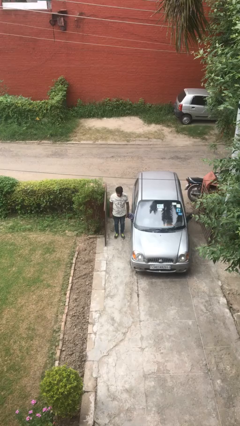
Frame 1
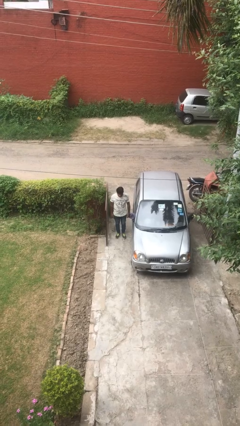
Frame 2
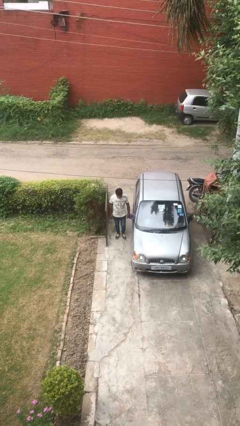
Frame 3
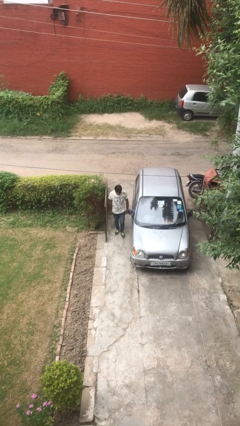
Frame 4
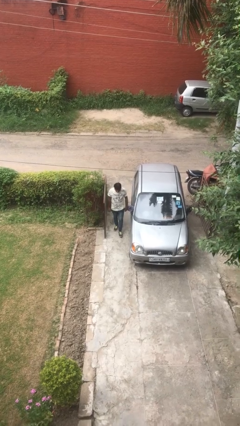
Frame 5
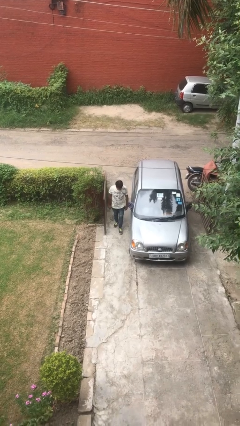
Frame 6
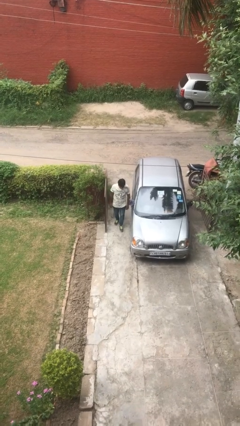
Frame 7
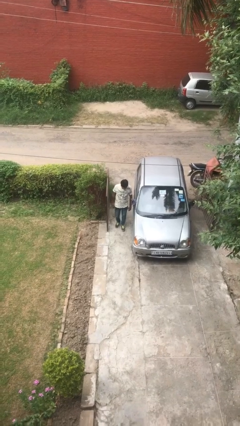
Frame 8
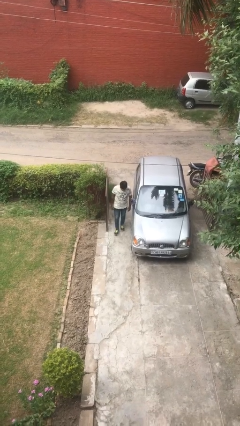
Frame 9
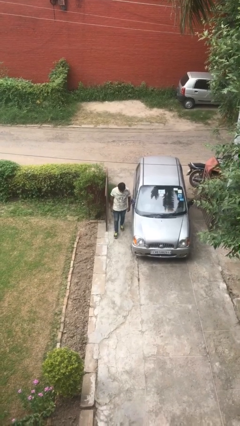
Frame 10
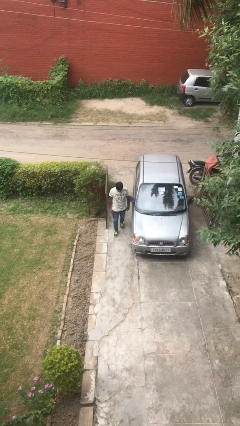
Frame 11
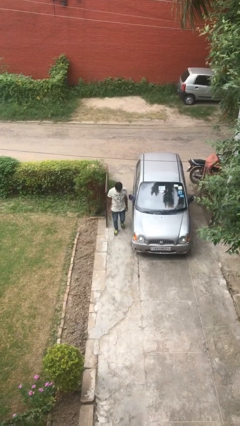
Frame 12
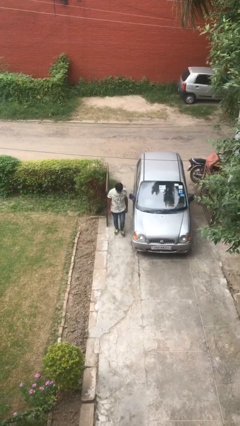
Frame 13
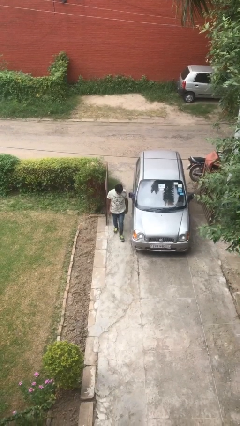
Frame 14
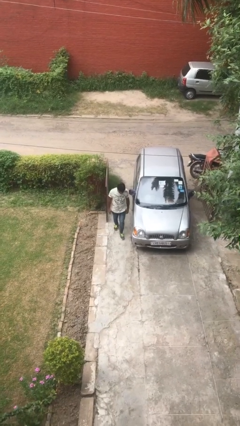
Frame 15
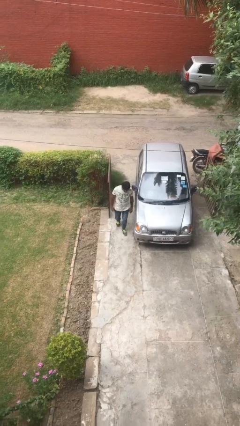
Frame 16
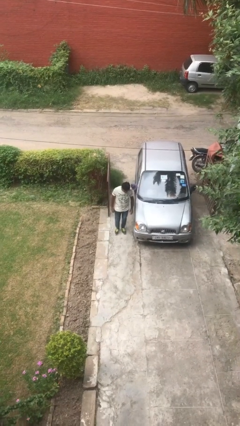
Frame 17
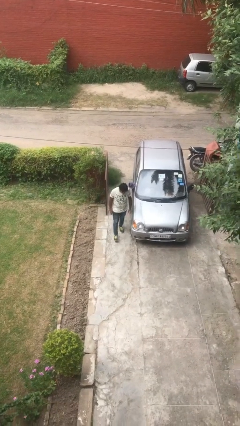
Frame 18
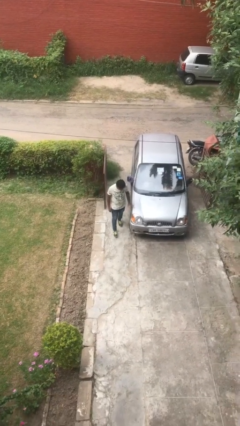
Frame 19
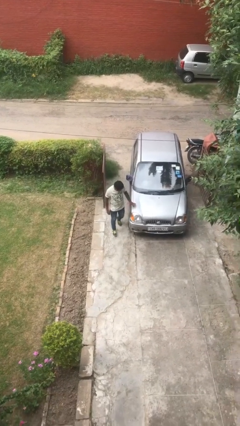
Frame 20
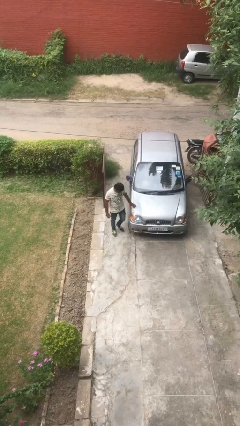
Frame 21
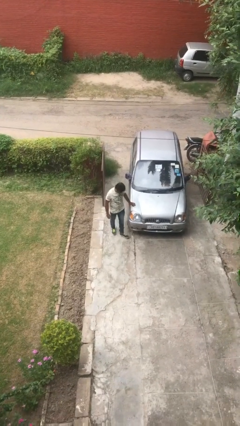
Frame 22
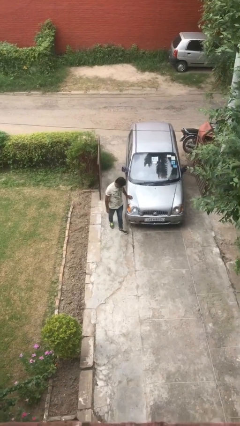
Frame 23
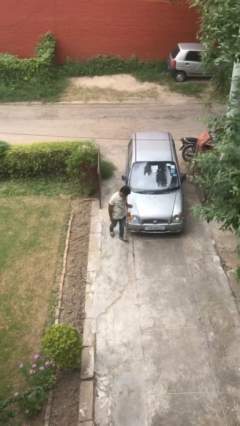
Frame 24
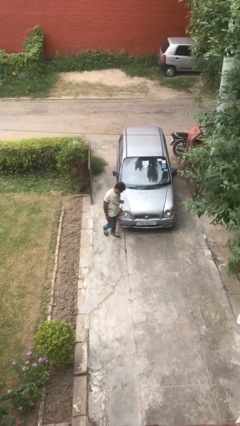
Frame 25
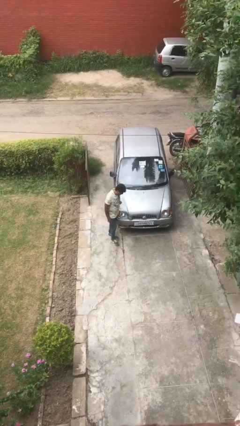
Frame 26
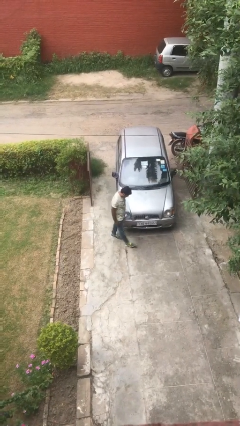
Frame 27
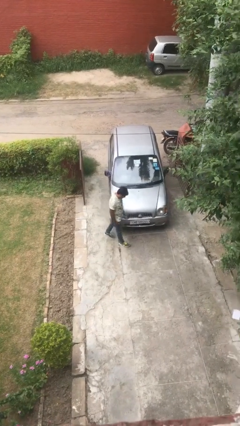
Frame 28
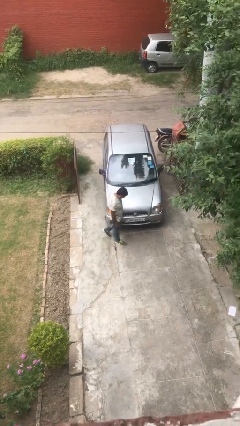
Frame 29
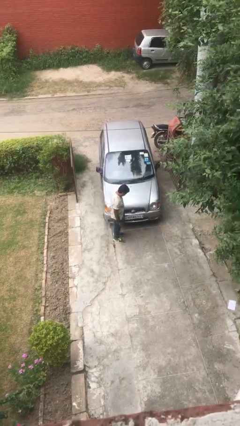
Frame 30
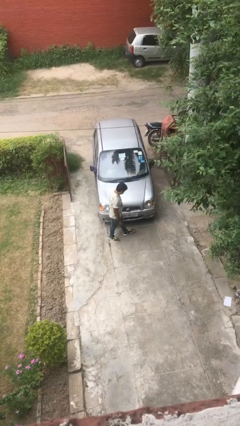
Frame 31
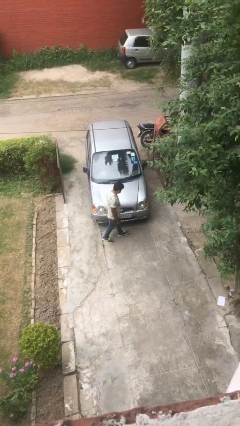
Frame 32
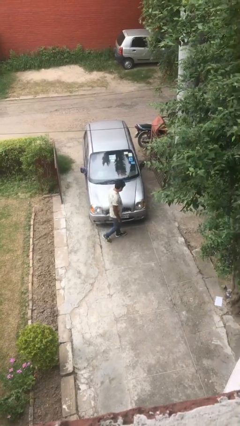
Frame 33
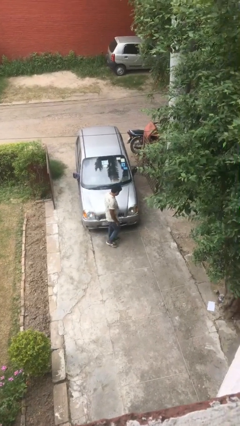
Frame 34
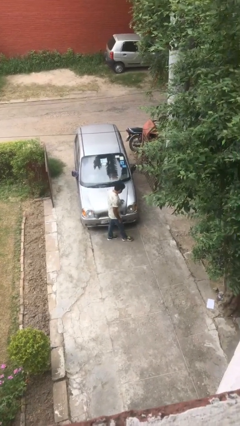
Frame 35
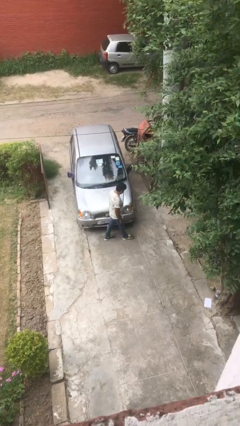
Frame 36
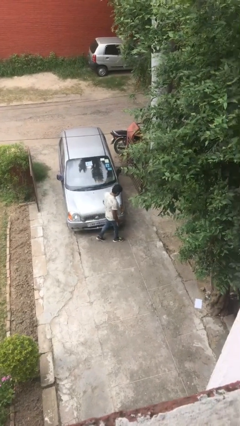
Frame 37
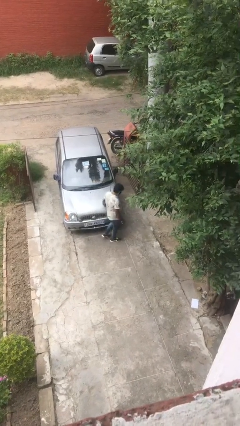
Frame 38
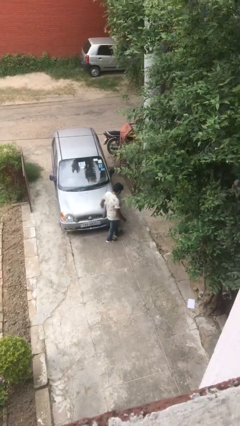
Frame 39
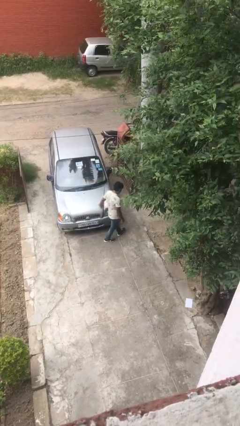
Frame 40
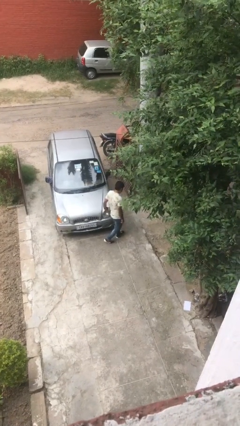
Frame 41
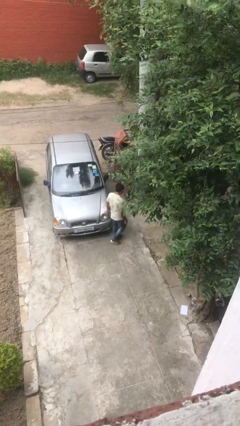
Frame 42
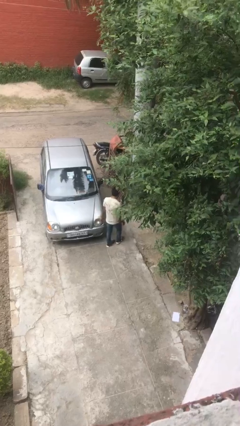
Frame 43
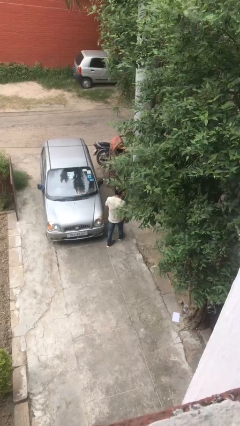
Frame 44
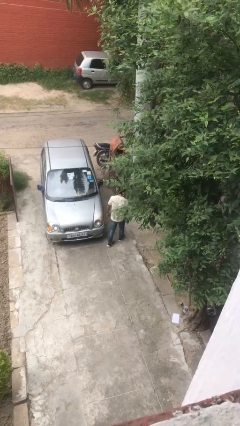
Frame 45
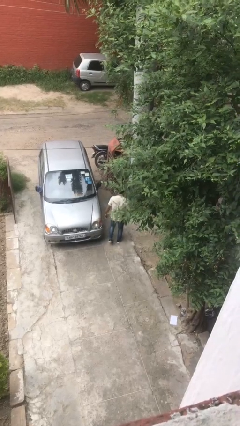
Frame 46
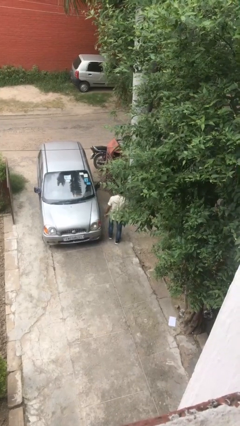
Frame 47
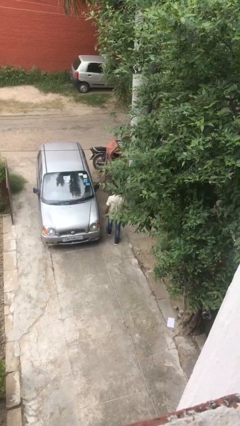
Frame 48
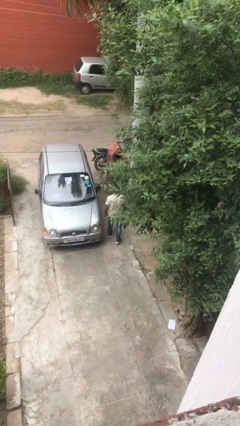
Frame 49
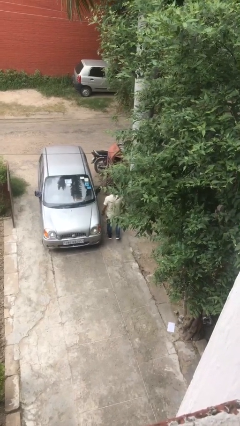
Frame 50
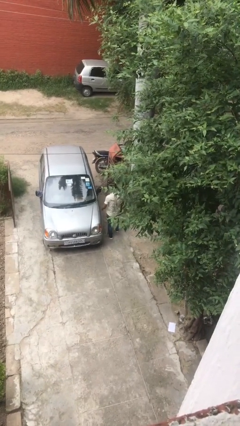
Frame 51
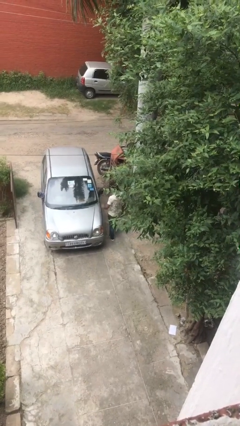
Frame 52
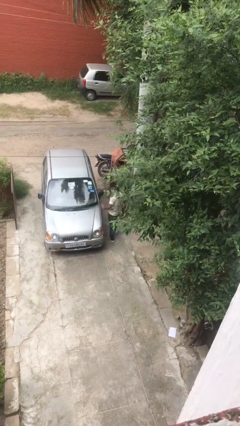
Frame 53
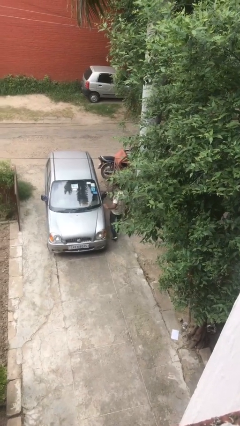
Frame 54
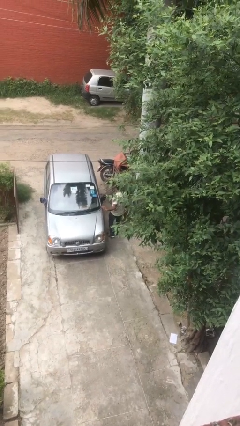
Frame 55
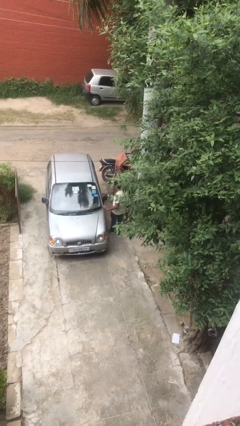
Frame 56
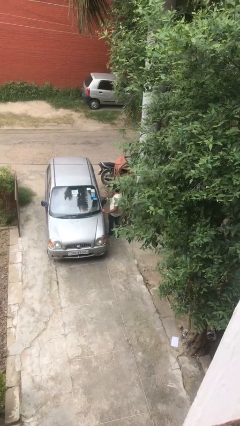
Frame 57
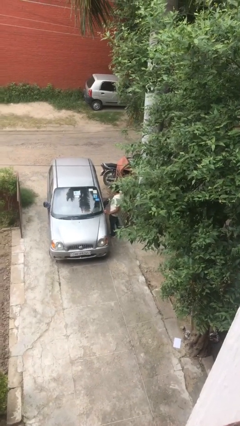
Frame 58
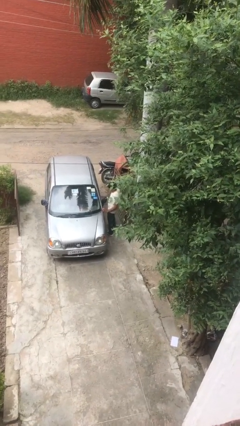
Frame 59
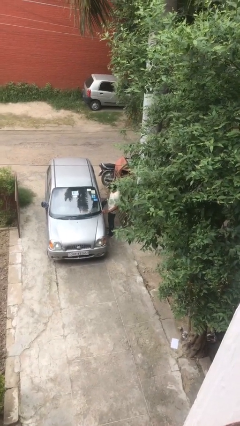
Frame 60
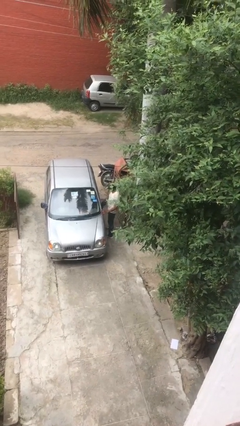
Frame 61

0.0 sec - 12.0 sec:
person walks around car

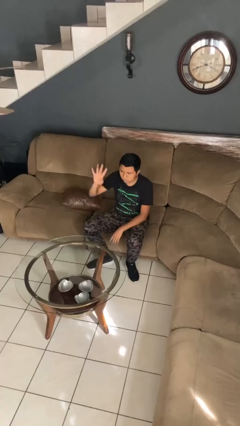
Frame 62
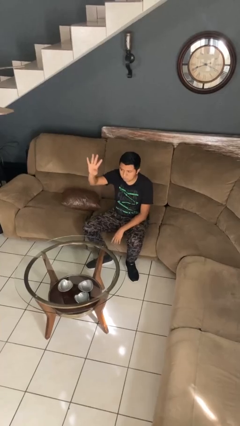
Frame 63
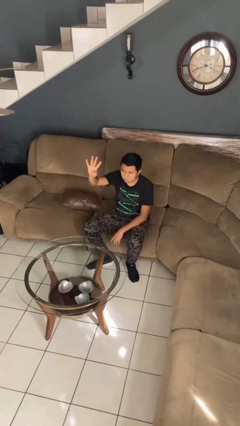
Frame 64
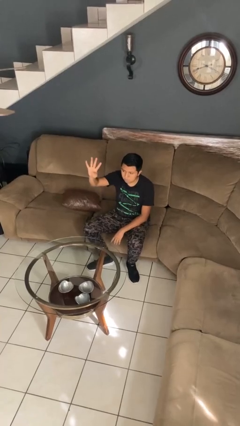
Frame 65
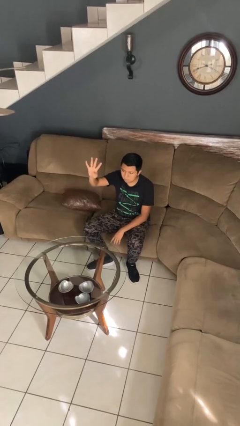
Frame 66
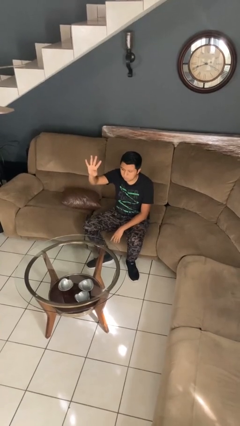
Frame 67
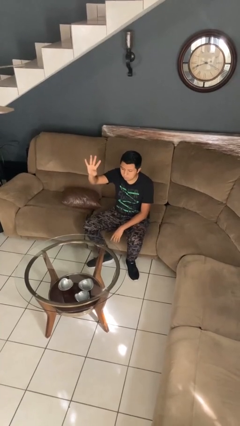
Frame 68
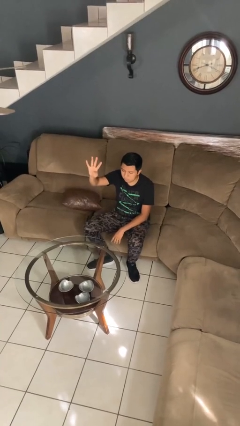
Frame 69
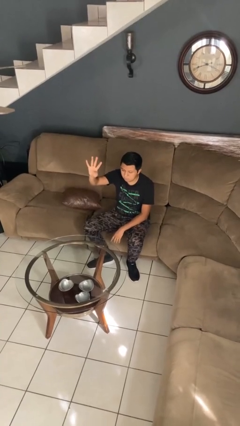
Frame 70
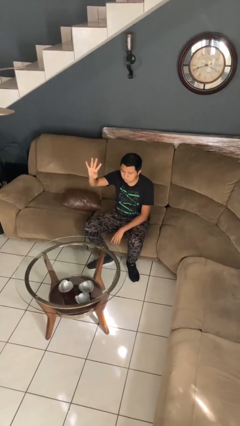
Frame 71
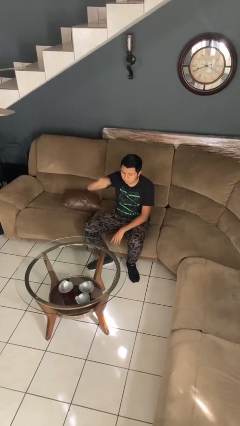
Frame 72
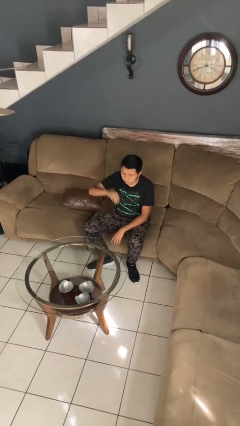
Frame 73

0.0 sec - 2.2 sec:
person gestures number four

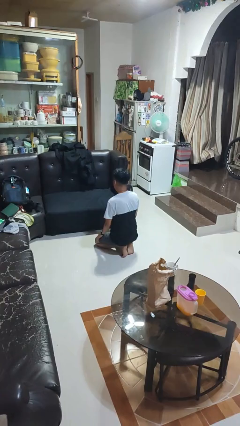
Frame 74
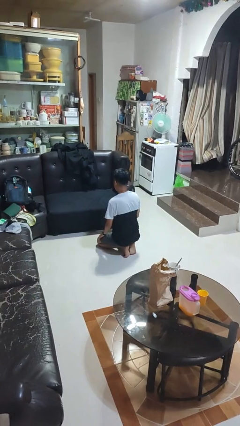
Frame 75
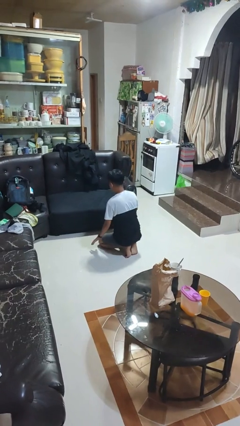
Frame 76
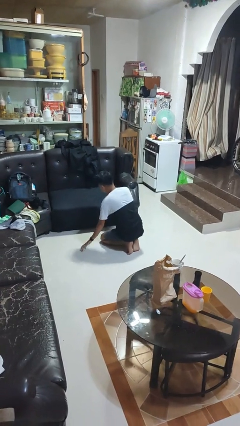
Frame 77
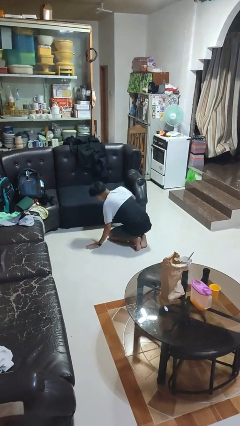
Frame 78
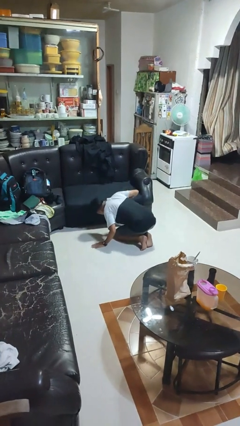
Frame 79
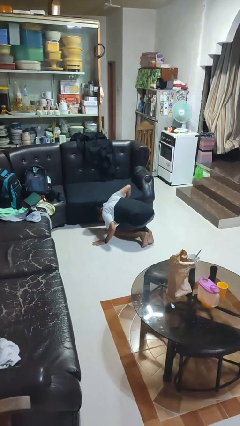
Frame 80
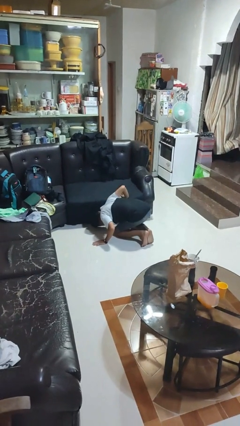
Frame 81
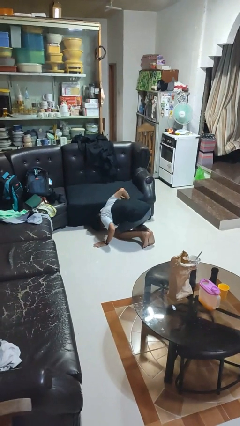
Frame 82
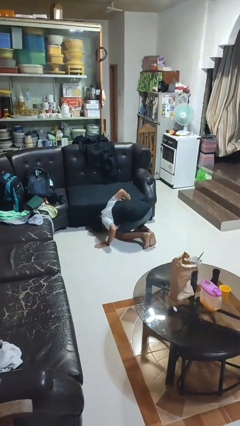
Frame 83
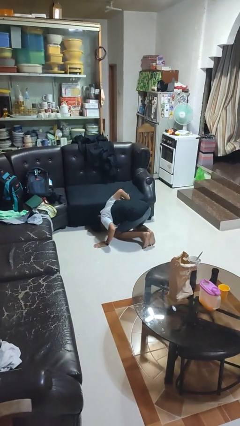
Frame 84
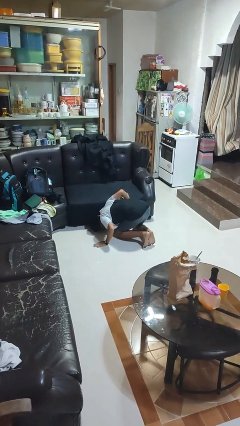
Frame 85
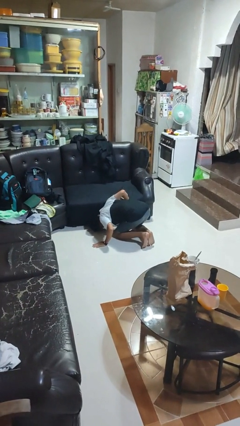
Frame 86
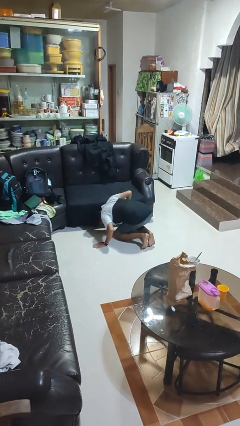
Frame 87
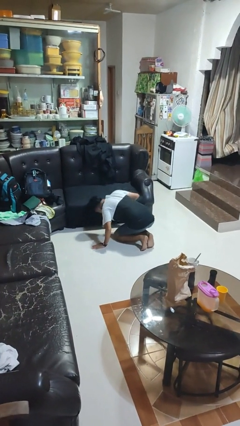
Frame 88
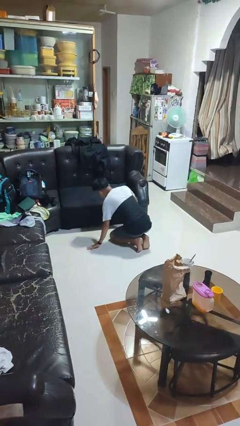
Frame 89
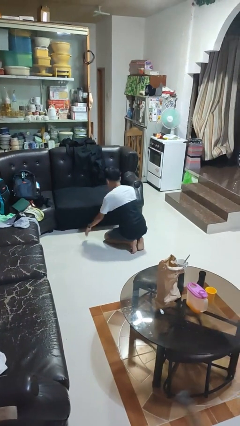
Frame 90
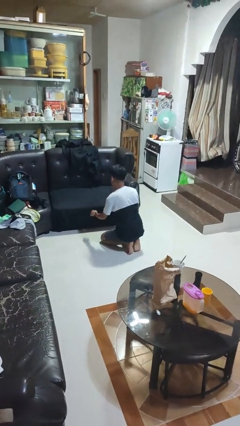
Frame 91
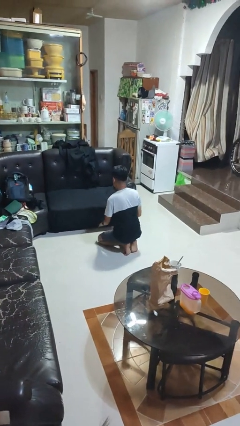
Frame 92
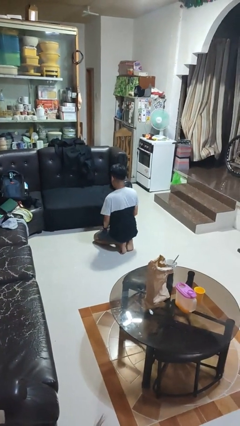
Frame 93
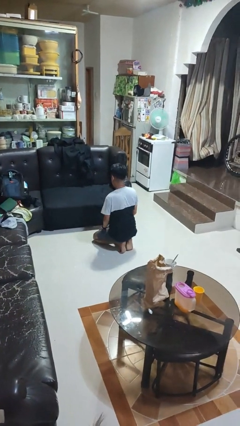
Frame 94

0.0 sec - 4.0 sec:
person searches under couch
